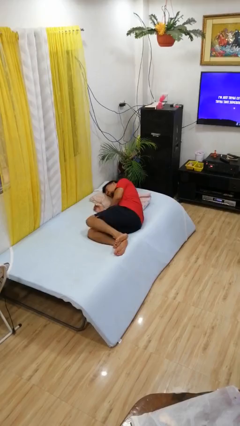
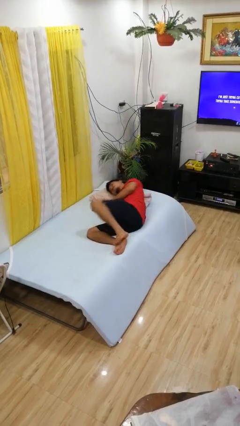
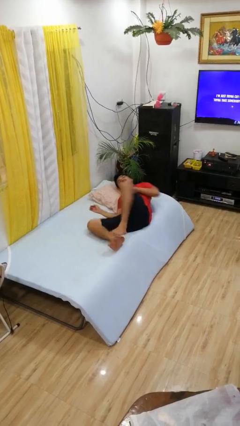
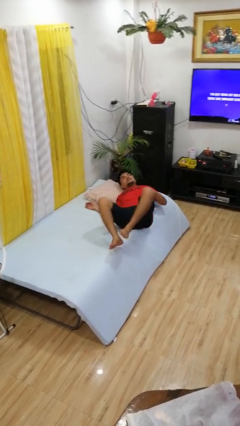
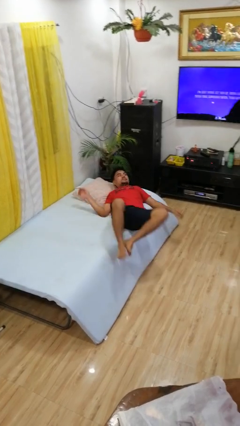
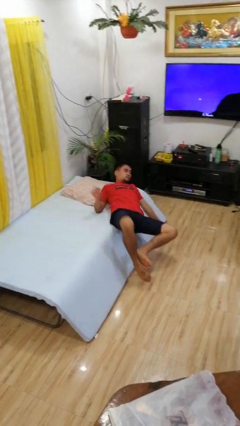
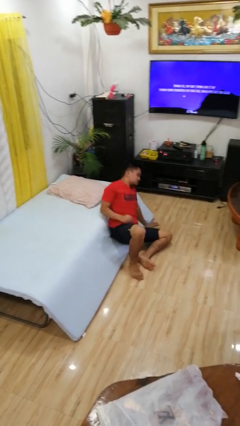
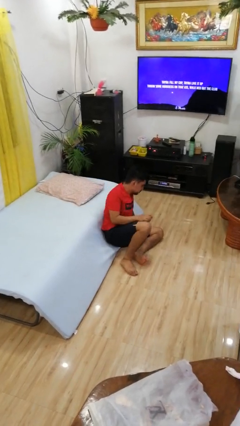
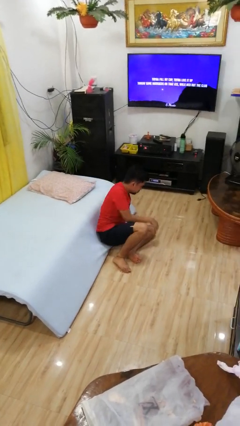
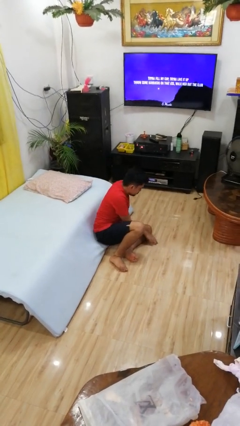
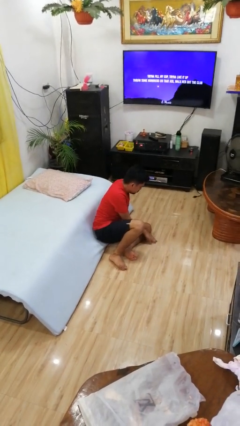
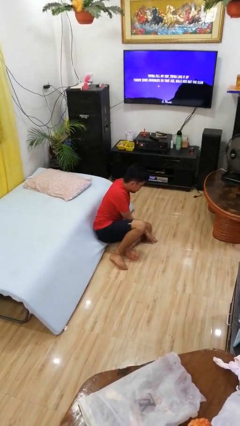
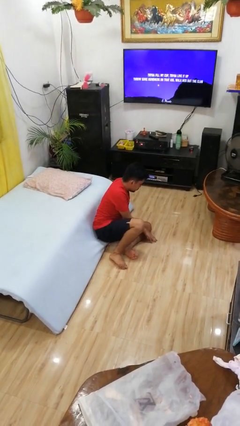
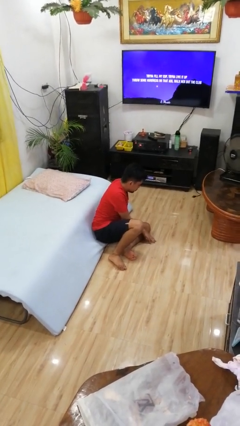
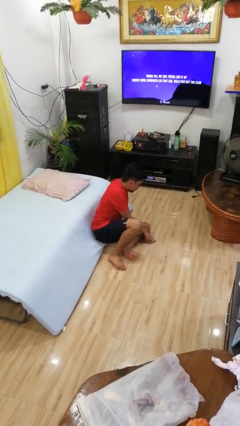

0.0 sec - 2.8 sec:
person falls from bed

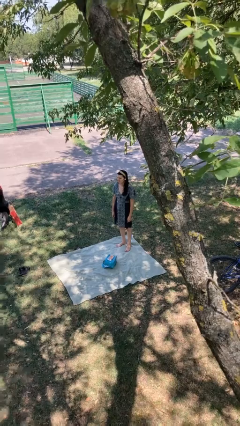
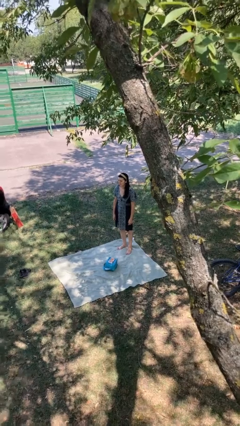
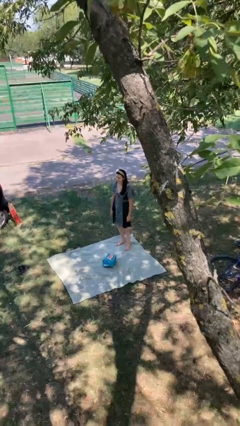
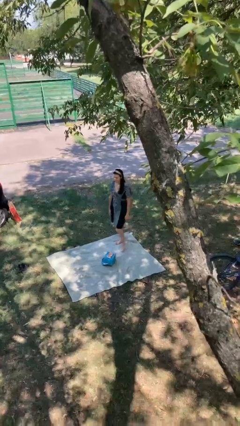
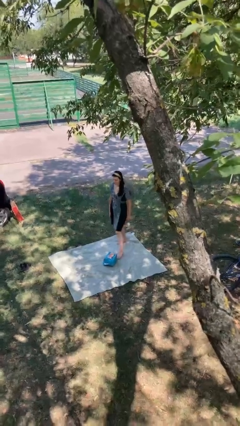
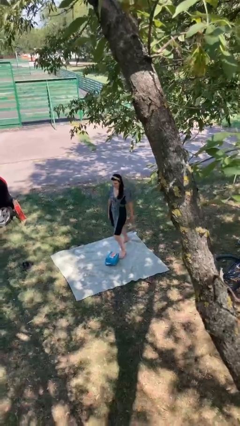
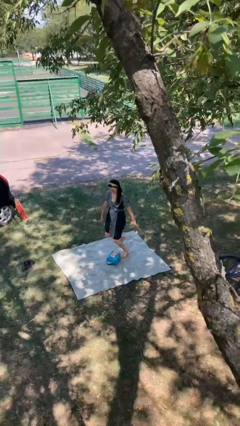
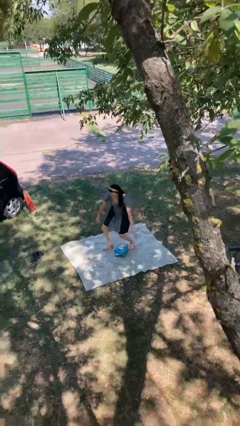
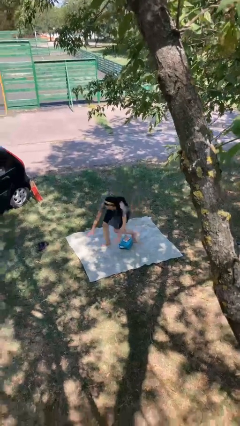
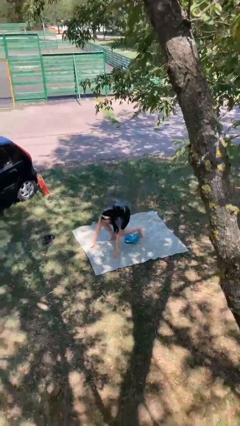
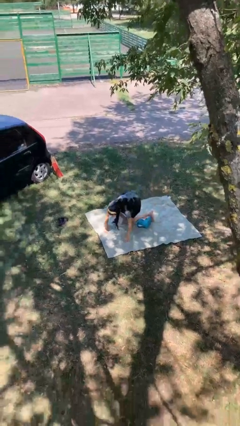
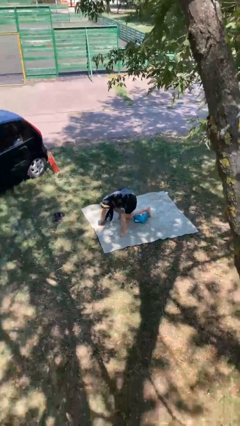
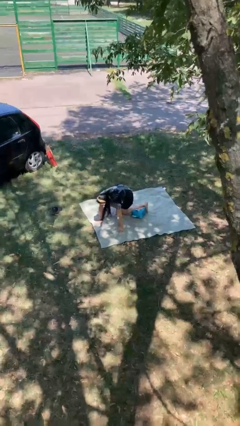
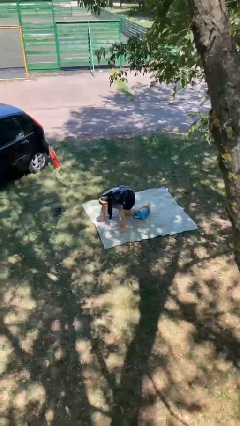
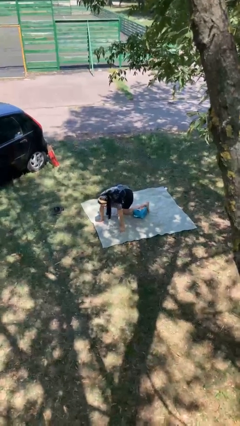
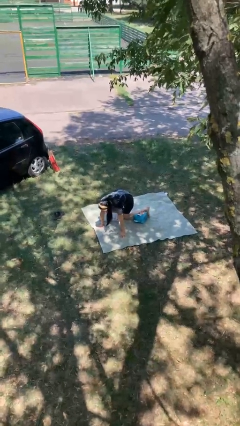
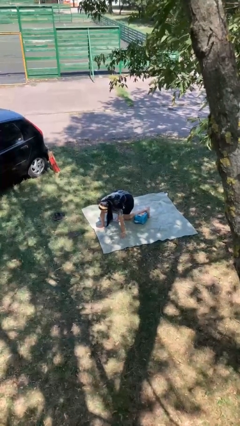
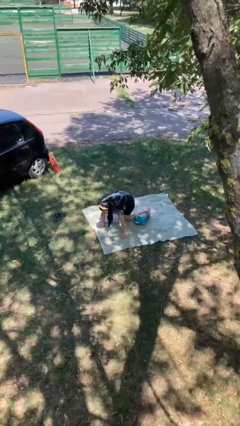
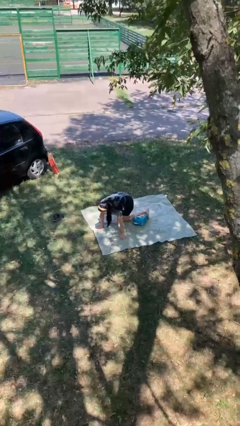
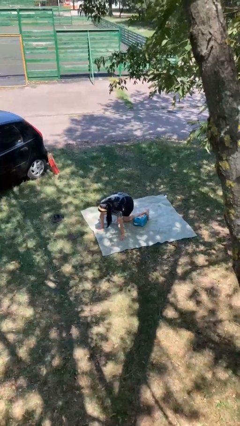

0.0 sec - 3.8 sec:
person trips on object on floor

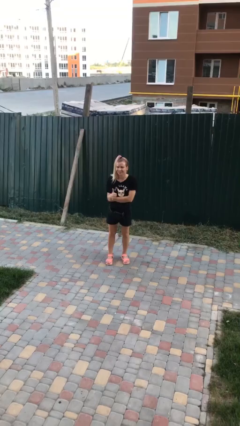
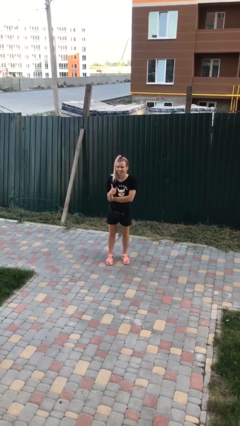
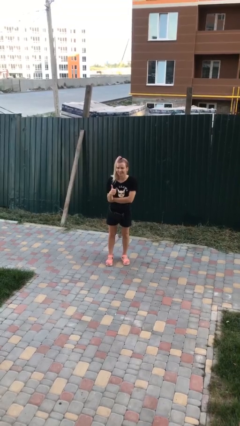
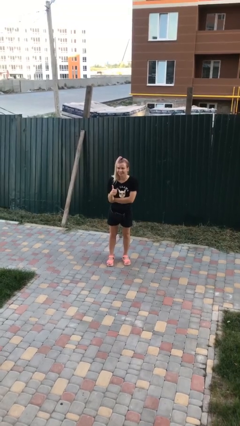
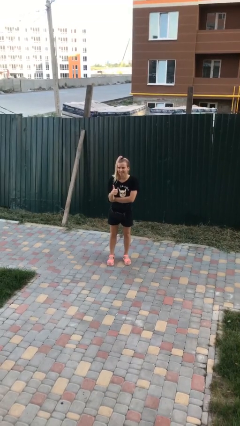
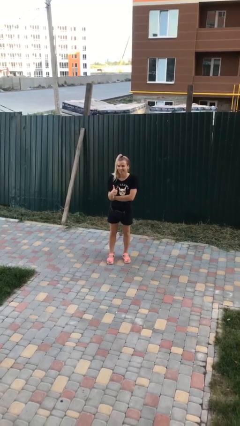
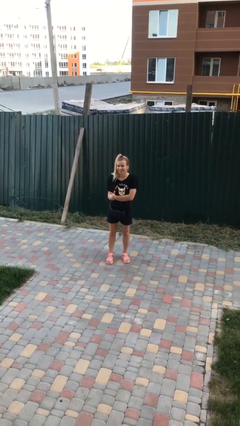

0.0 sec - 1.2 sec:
person gestures thumbs up

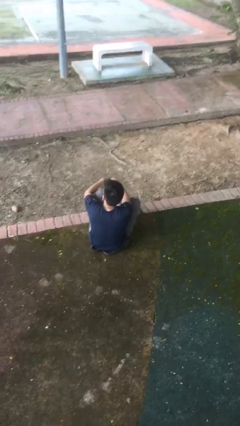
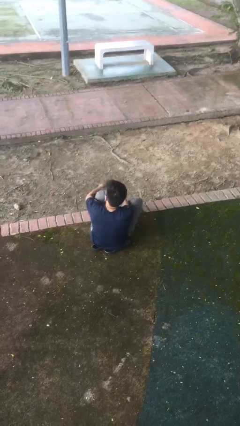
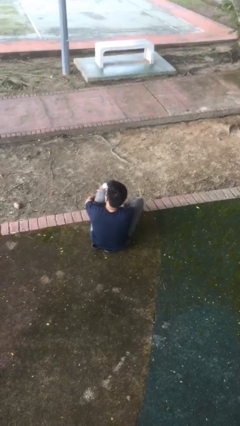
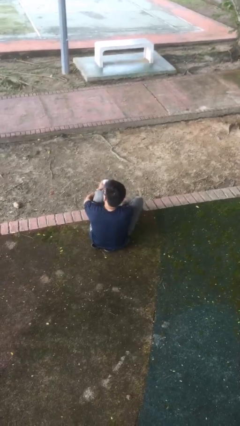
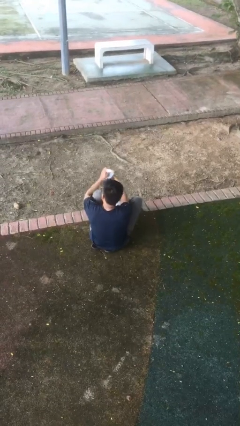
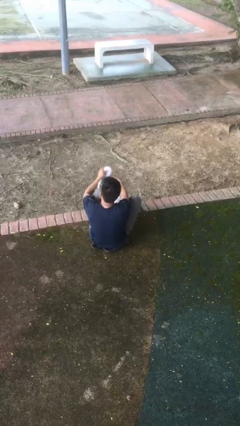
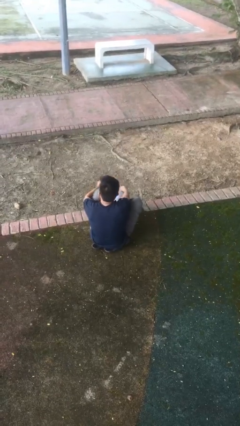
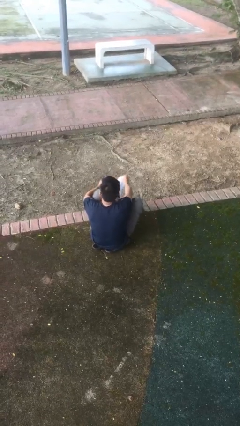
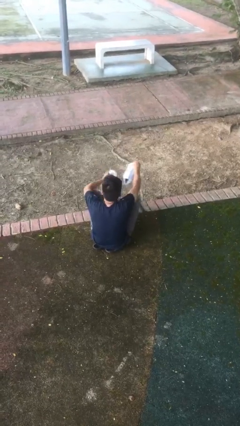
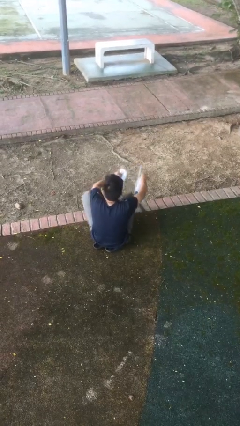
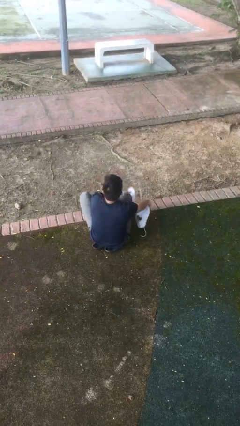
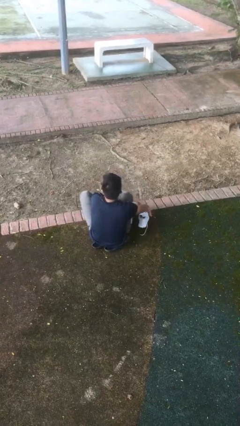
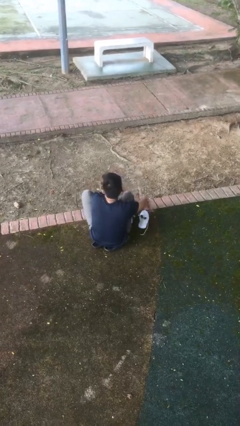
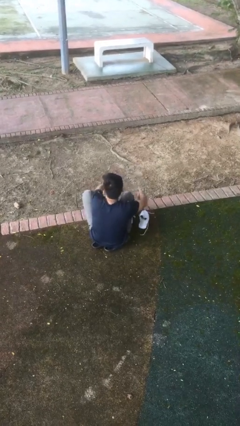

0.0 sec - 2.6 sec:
person takes off shoes

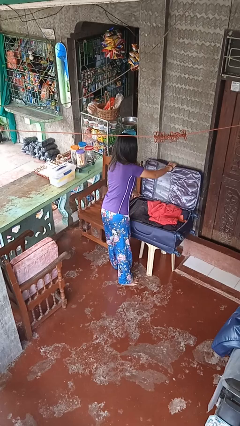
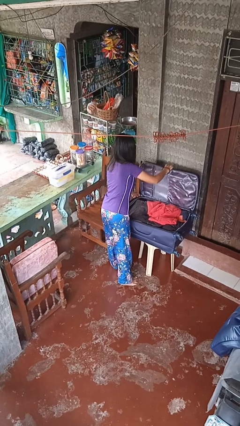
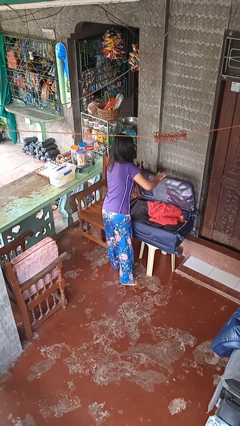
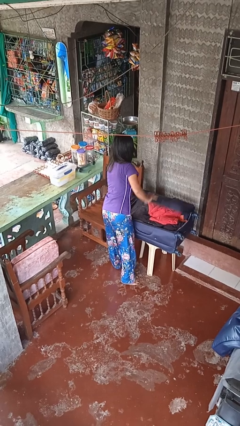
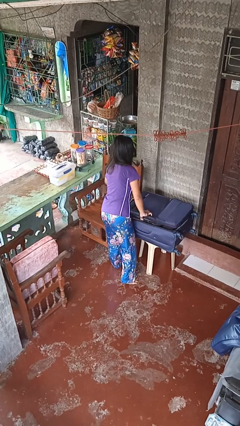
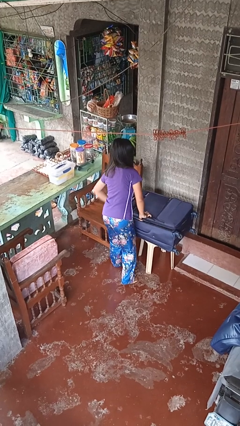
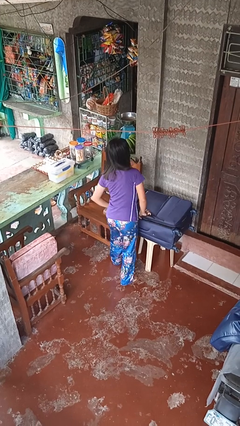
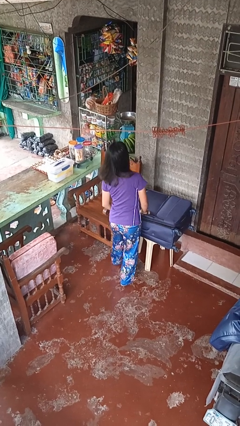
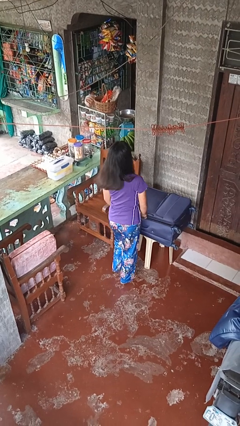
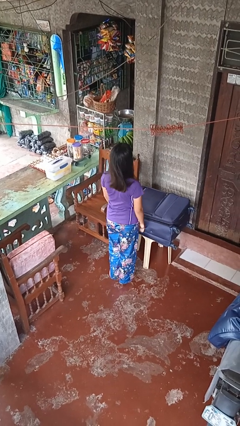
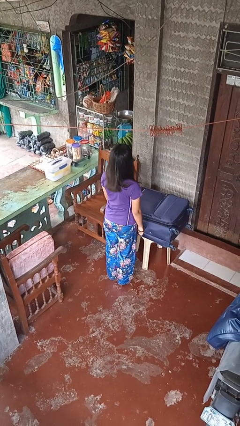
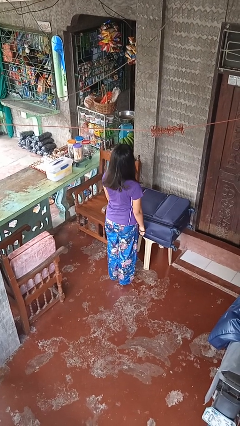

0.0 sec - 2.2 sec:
person closes suitcase

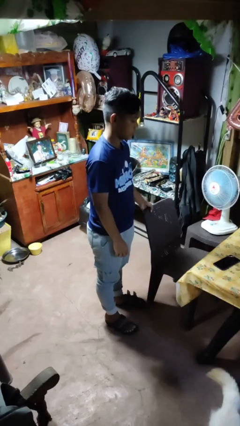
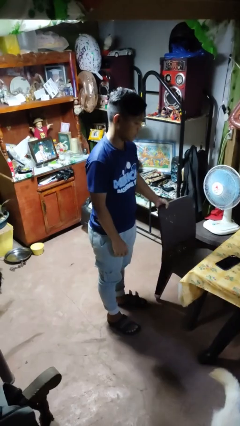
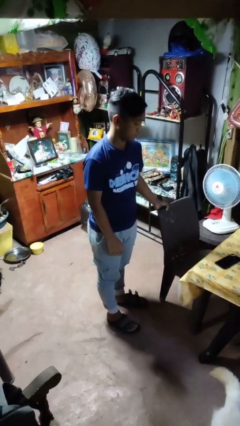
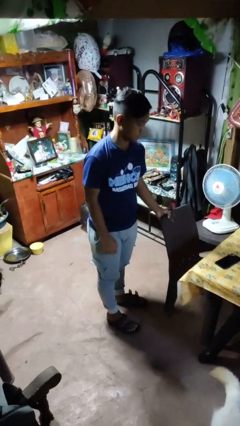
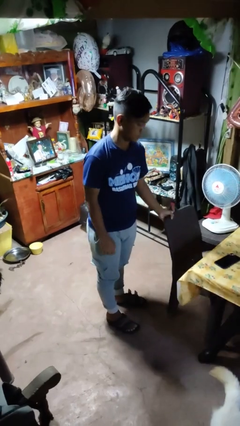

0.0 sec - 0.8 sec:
person pushes in chair

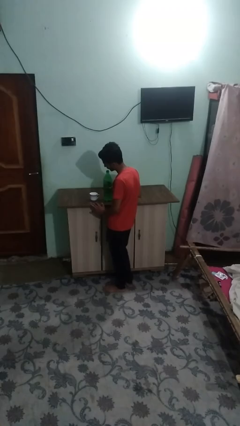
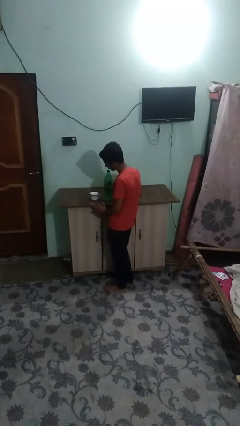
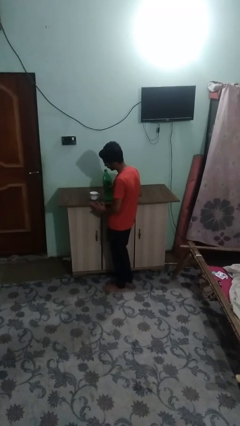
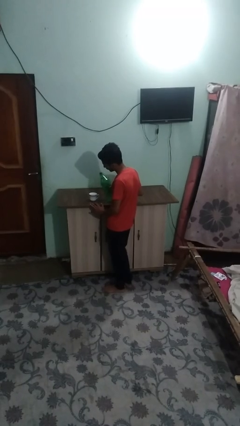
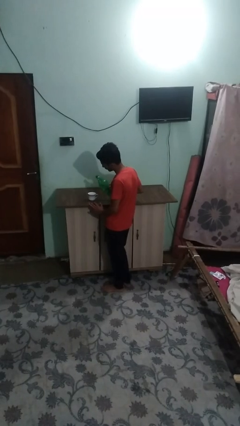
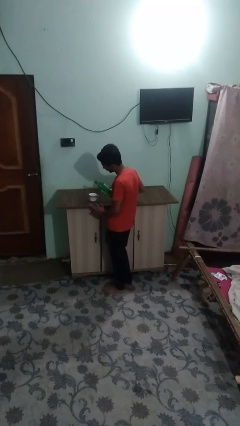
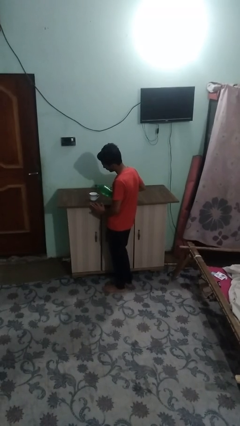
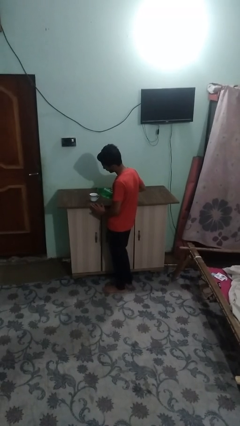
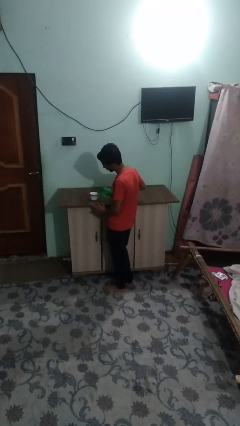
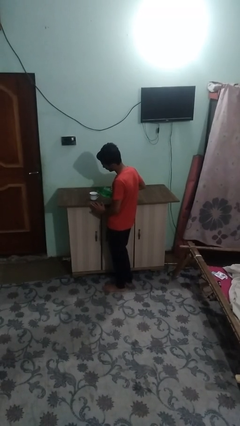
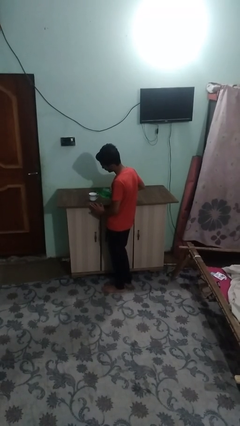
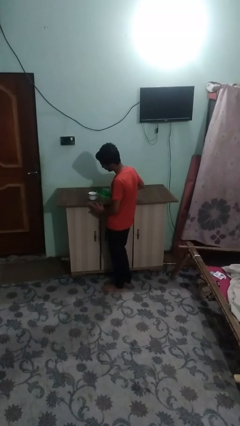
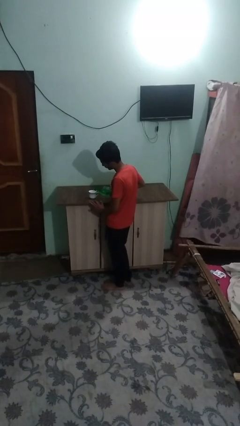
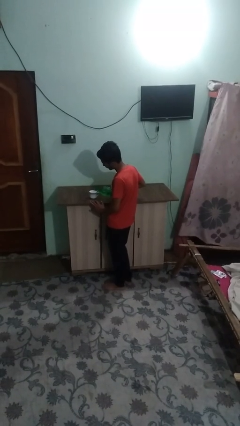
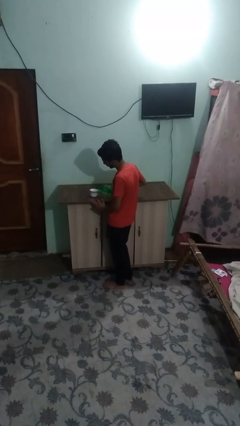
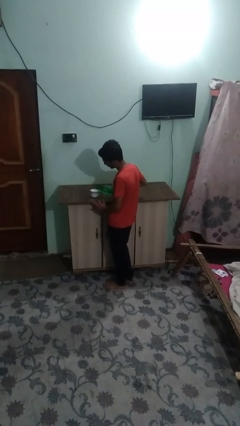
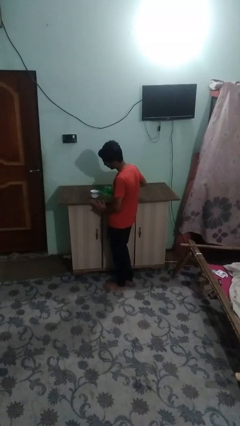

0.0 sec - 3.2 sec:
person pours liquid into cup

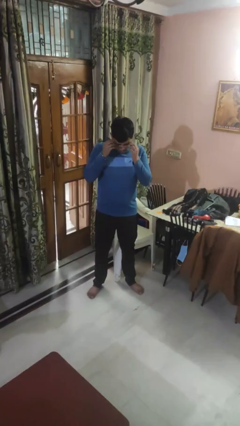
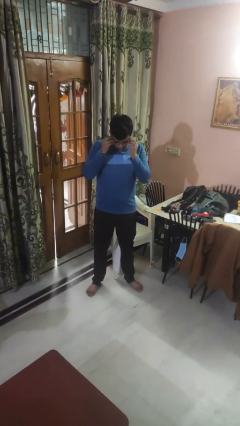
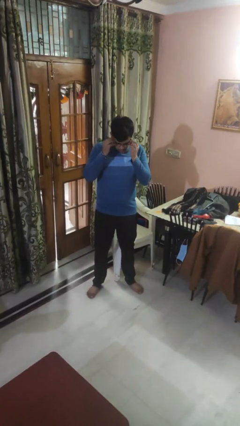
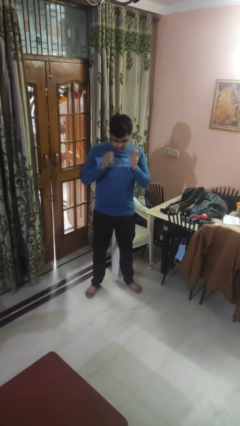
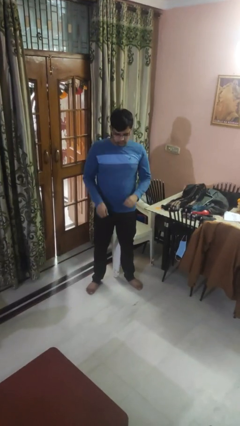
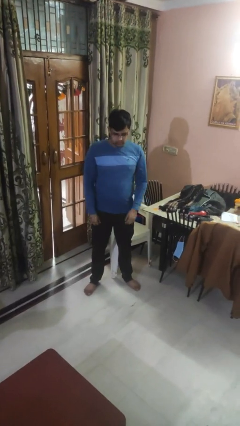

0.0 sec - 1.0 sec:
person puts on glasses
